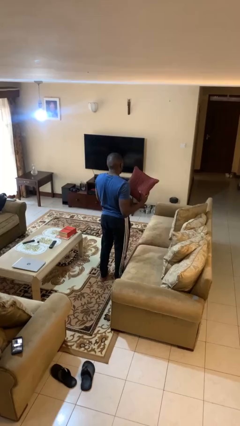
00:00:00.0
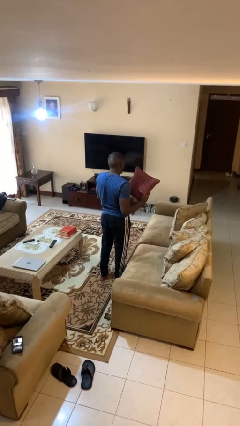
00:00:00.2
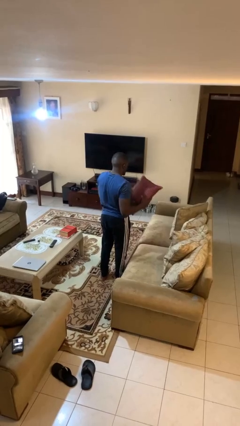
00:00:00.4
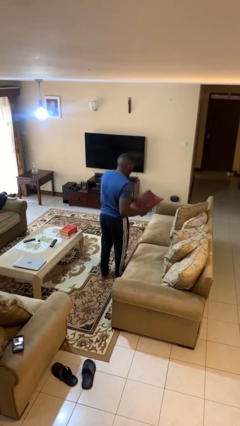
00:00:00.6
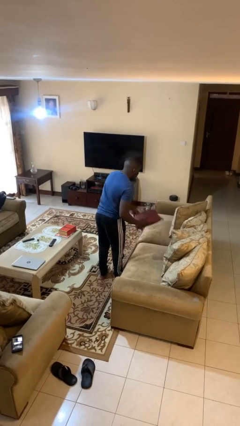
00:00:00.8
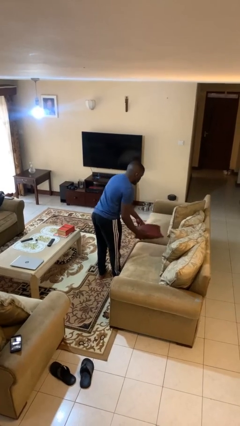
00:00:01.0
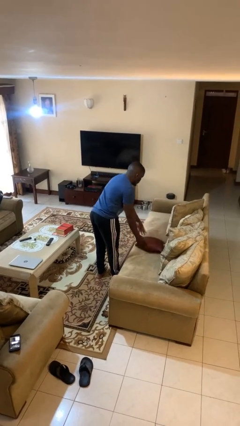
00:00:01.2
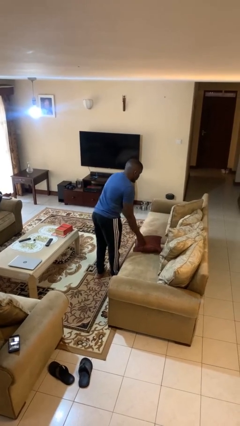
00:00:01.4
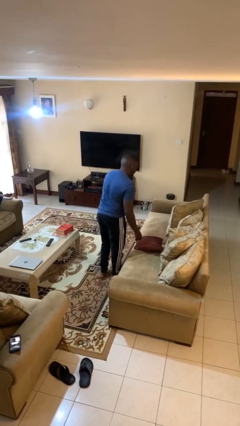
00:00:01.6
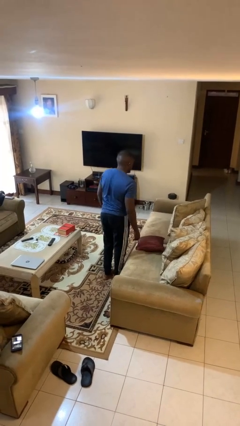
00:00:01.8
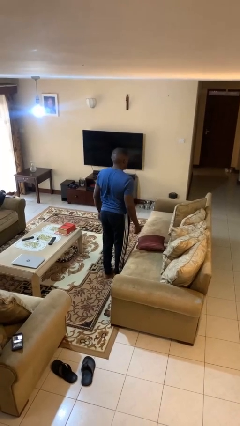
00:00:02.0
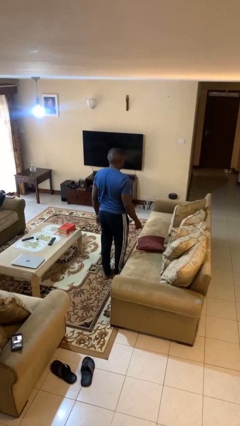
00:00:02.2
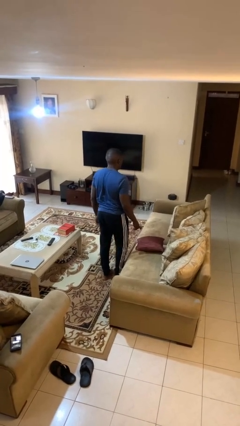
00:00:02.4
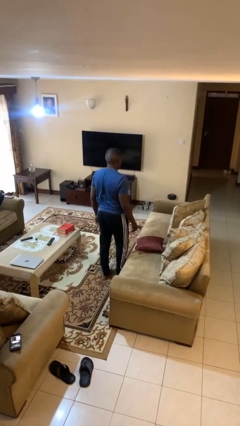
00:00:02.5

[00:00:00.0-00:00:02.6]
person puts down object on couch

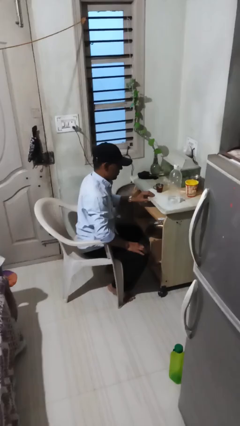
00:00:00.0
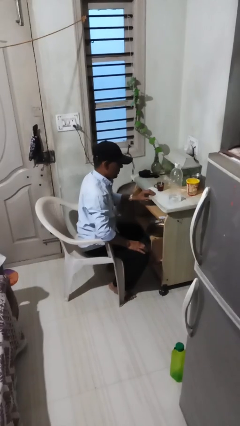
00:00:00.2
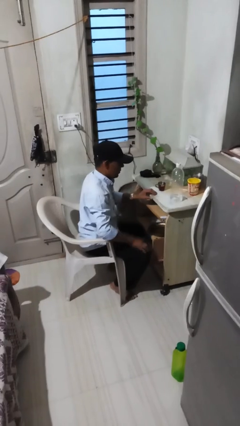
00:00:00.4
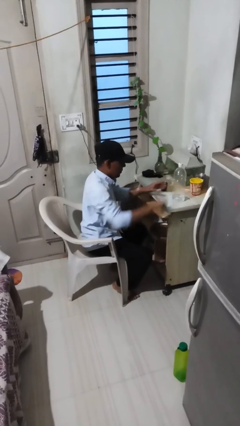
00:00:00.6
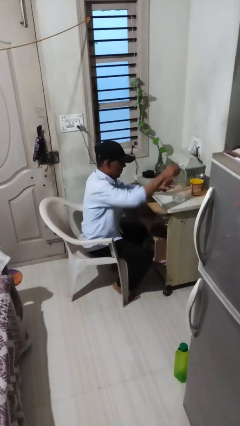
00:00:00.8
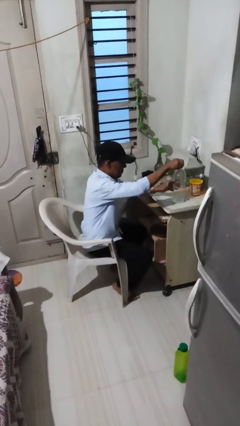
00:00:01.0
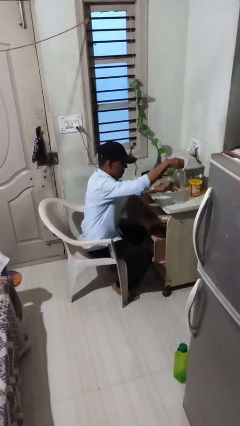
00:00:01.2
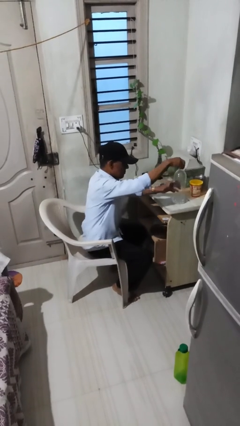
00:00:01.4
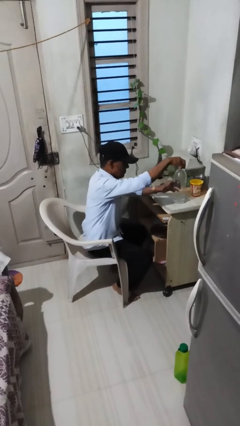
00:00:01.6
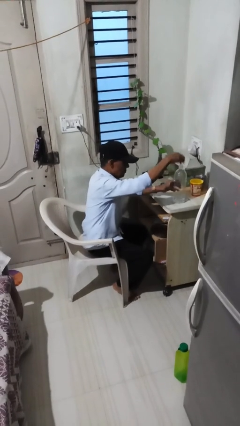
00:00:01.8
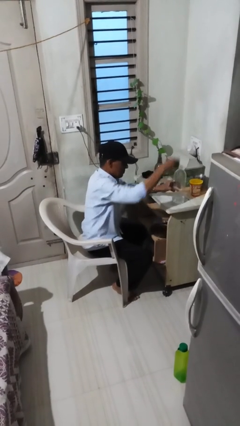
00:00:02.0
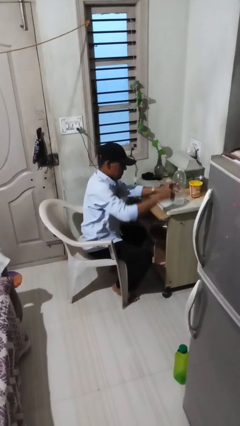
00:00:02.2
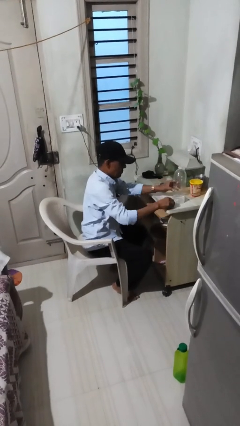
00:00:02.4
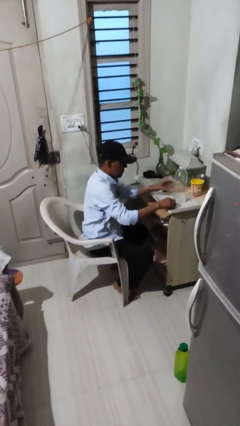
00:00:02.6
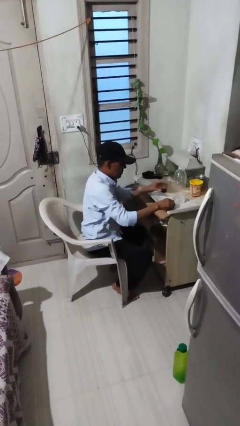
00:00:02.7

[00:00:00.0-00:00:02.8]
person unscrews lid from bottle

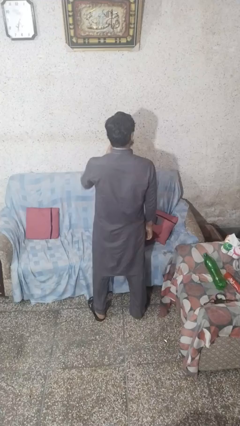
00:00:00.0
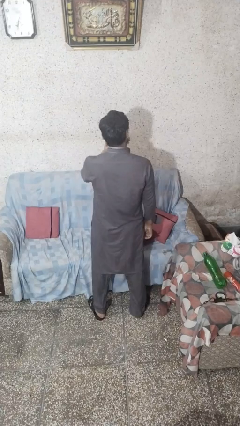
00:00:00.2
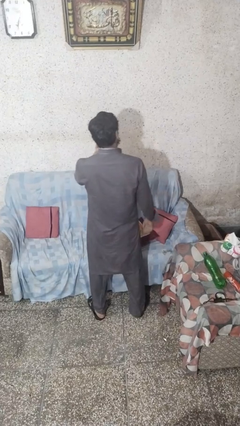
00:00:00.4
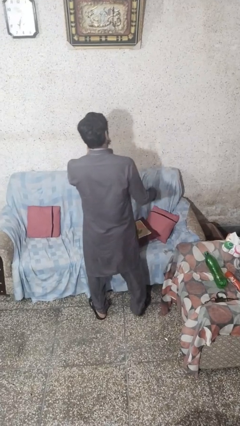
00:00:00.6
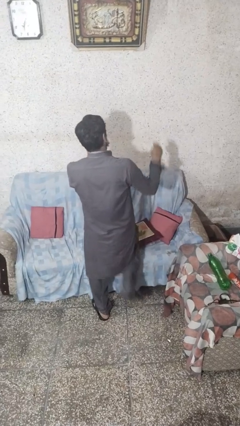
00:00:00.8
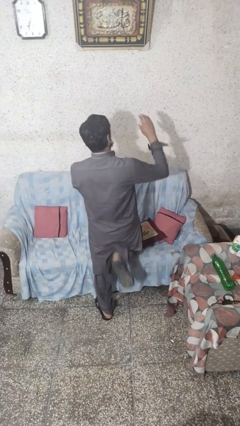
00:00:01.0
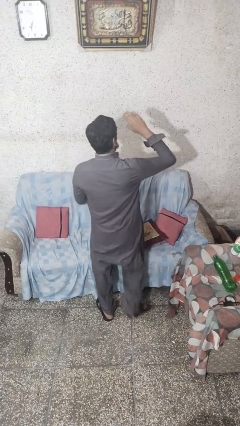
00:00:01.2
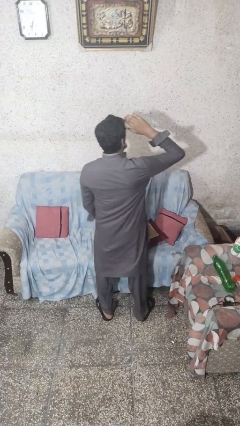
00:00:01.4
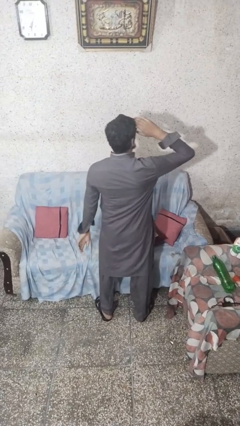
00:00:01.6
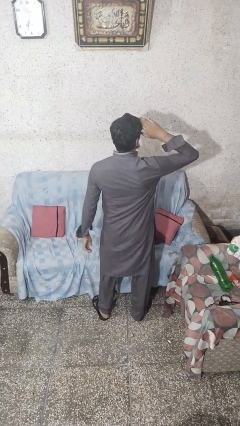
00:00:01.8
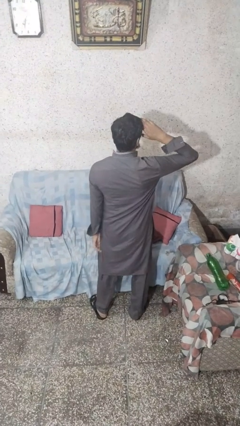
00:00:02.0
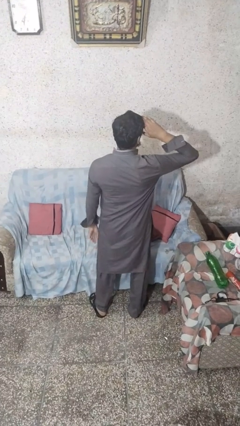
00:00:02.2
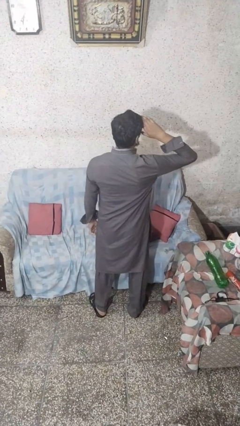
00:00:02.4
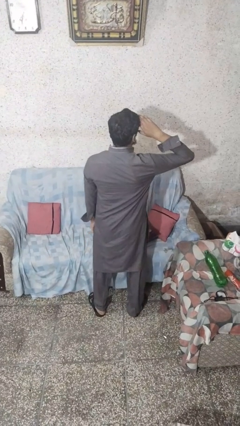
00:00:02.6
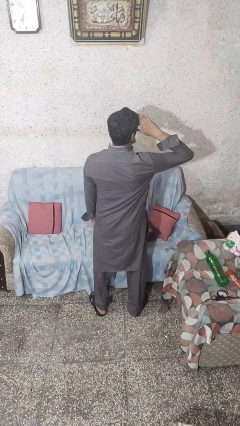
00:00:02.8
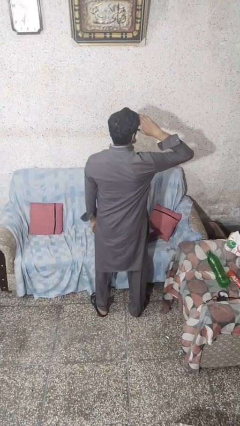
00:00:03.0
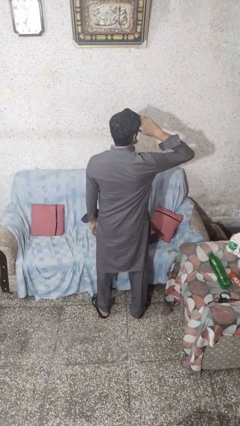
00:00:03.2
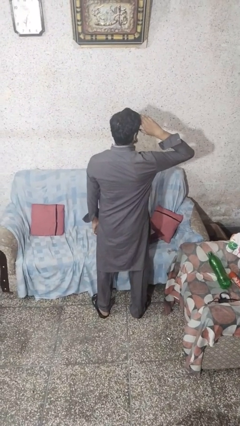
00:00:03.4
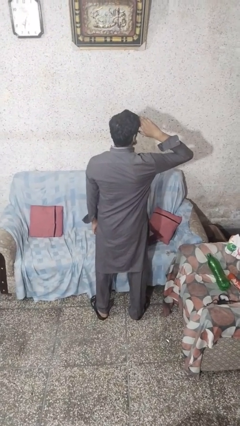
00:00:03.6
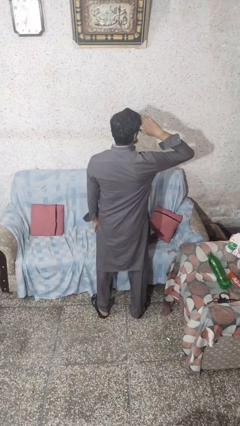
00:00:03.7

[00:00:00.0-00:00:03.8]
person salutes

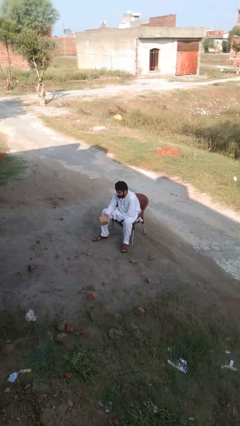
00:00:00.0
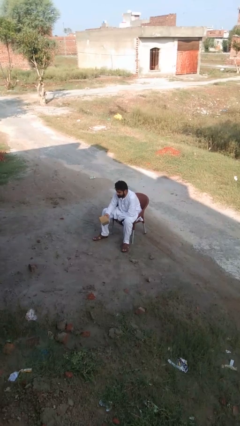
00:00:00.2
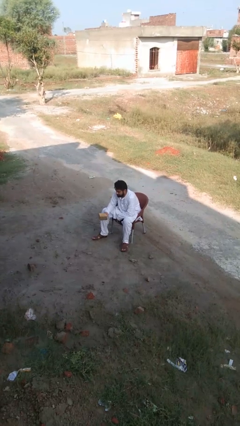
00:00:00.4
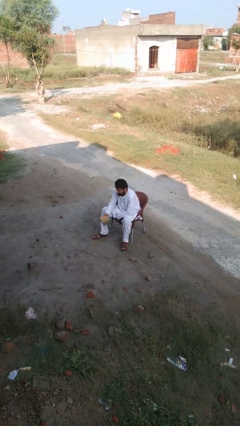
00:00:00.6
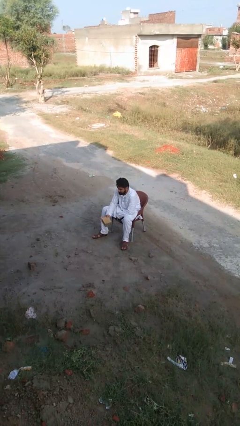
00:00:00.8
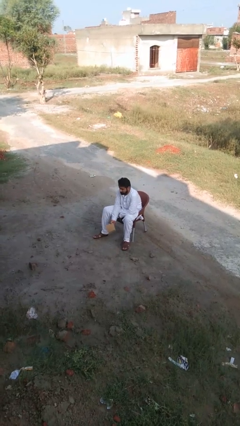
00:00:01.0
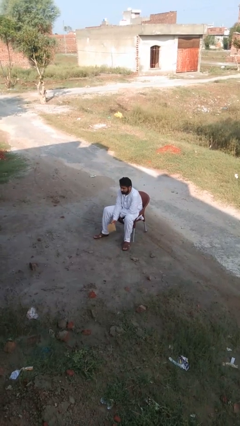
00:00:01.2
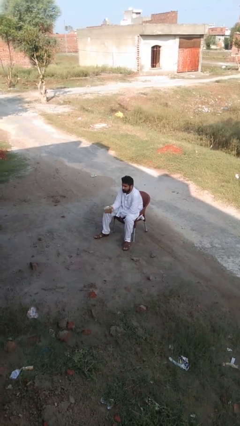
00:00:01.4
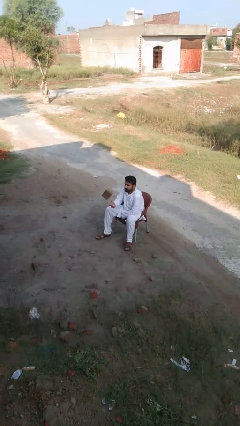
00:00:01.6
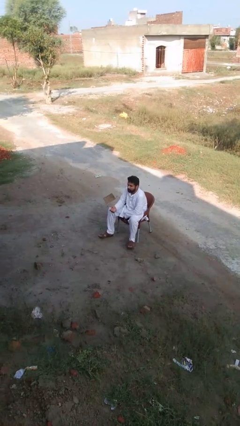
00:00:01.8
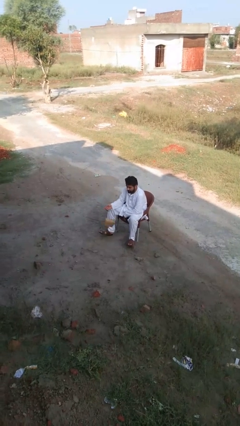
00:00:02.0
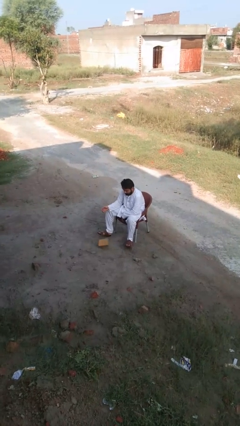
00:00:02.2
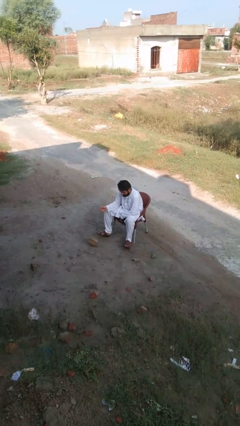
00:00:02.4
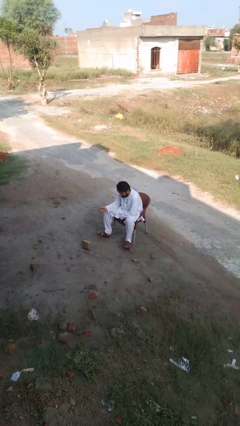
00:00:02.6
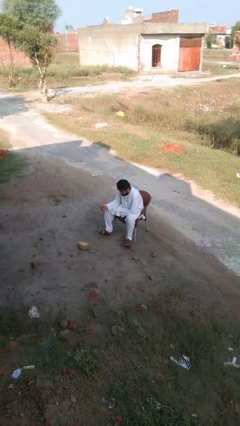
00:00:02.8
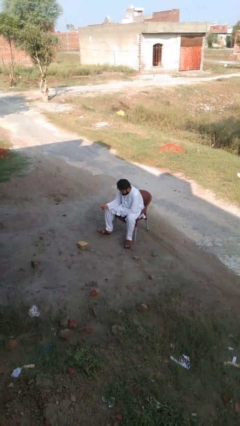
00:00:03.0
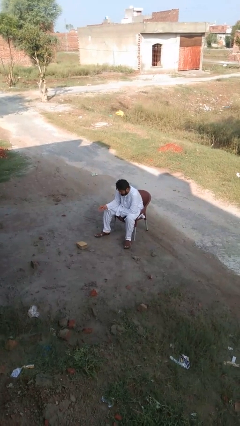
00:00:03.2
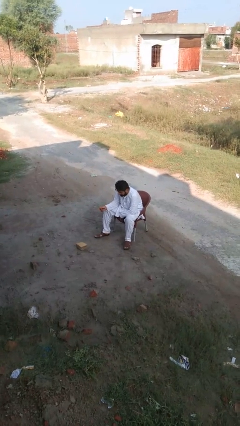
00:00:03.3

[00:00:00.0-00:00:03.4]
person throws object into air

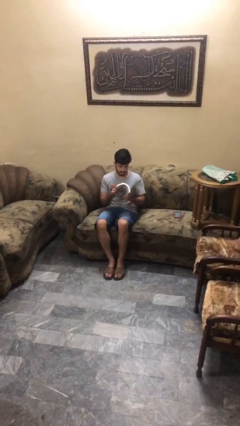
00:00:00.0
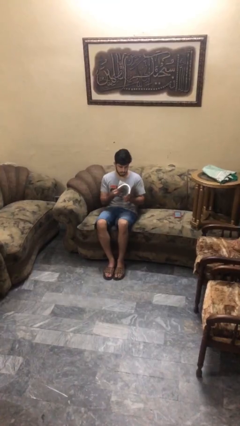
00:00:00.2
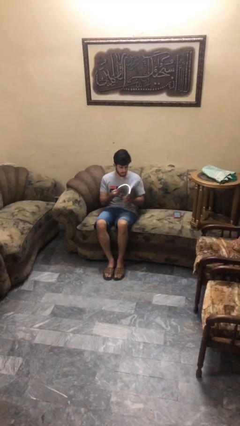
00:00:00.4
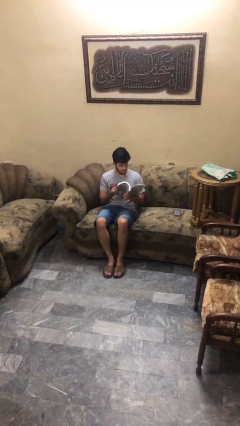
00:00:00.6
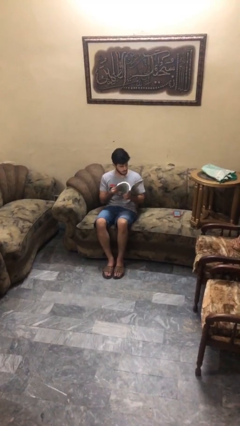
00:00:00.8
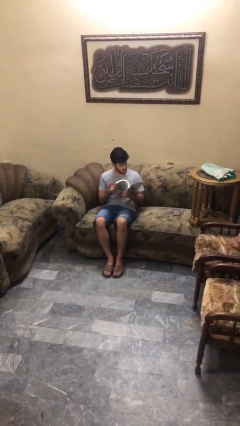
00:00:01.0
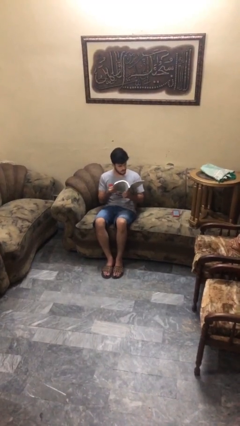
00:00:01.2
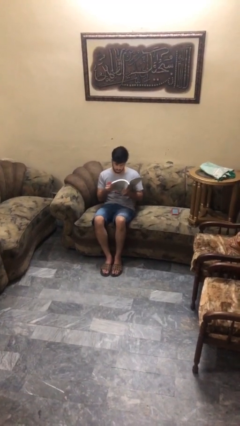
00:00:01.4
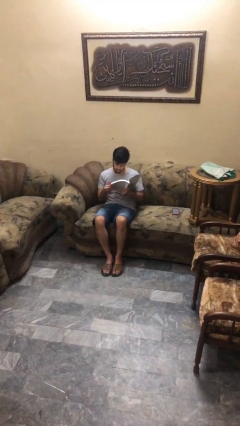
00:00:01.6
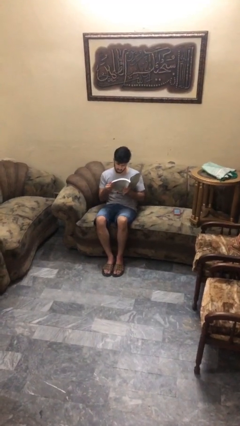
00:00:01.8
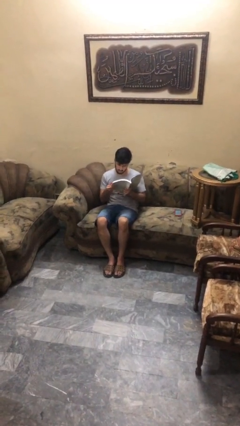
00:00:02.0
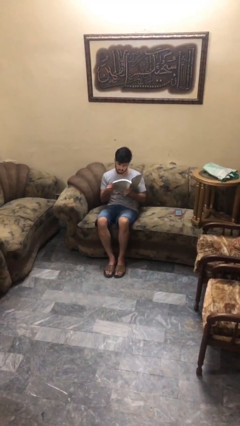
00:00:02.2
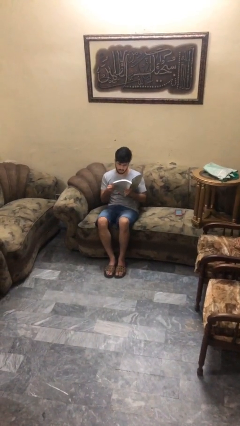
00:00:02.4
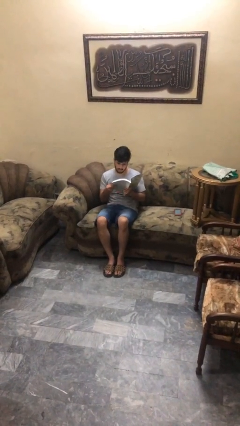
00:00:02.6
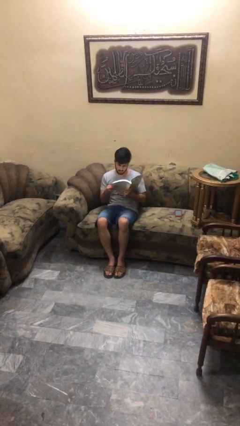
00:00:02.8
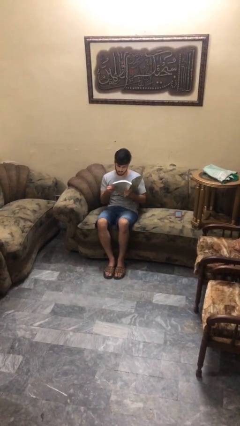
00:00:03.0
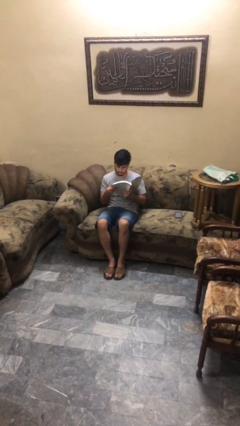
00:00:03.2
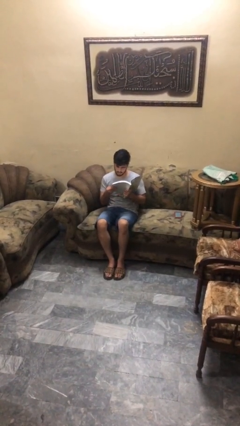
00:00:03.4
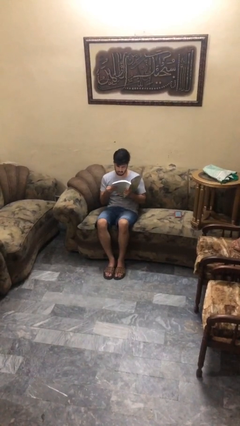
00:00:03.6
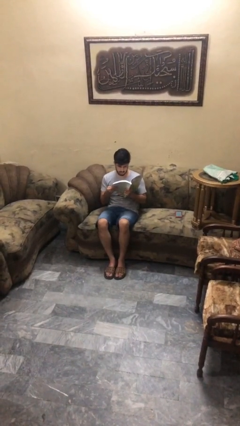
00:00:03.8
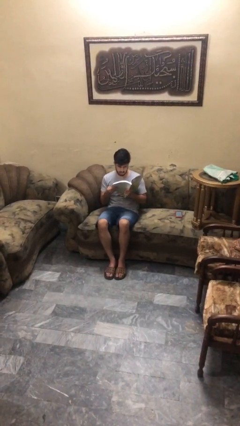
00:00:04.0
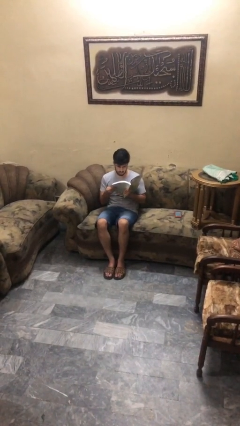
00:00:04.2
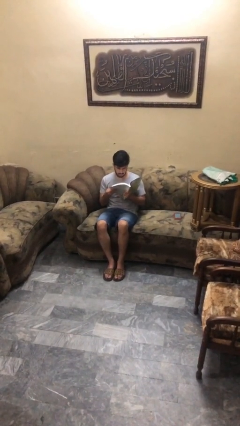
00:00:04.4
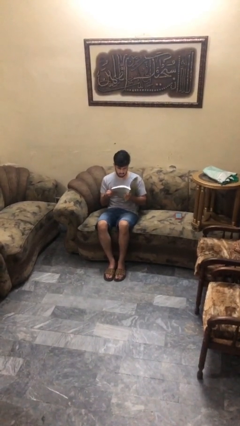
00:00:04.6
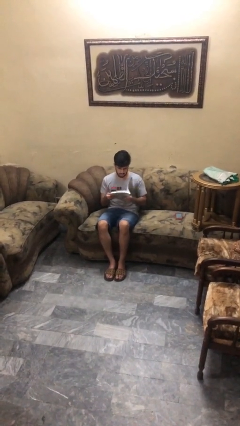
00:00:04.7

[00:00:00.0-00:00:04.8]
person reads book

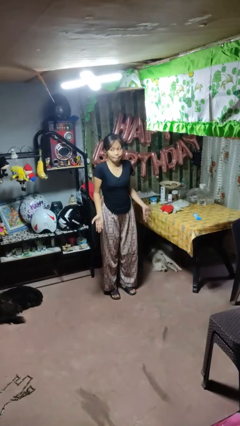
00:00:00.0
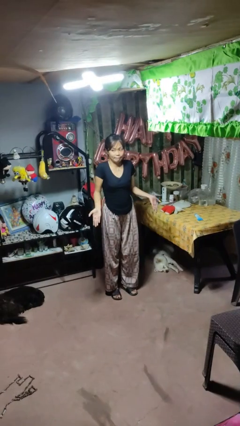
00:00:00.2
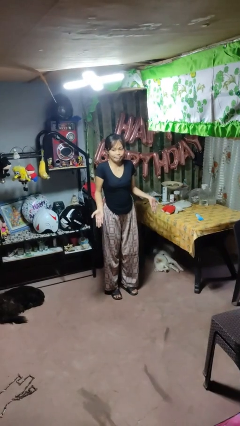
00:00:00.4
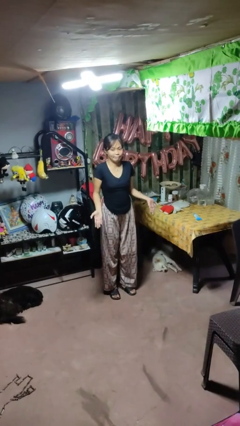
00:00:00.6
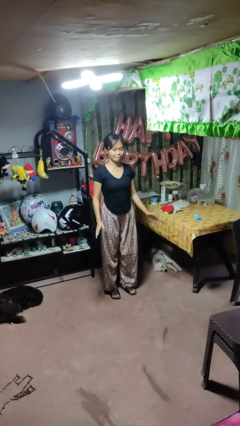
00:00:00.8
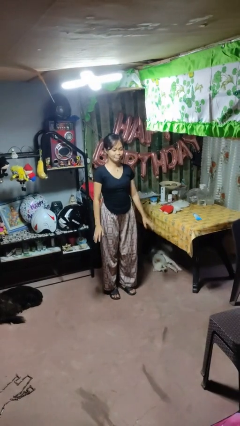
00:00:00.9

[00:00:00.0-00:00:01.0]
person shrugs
